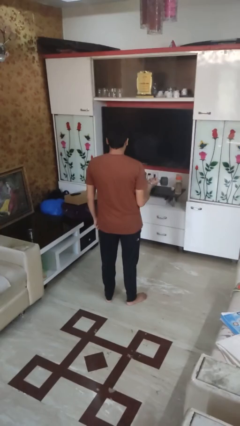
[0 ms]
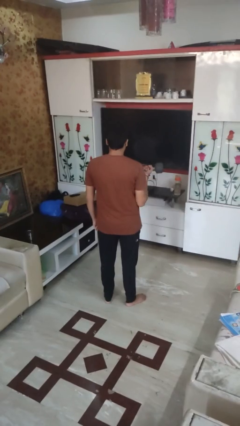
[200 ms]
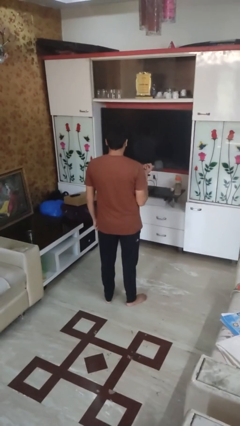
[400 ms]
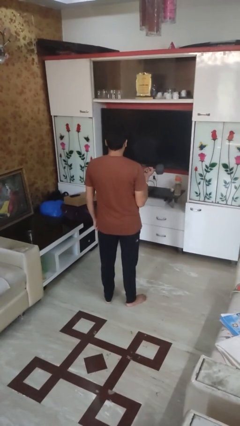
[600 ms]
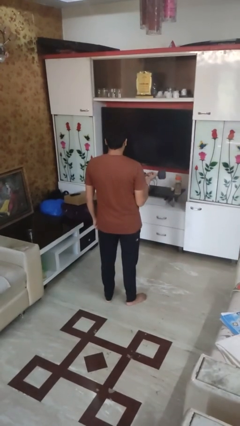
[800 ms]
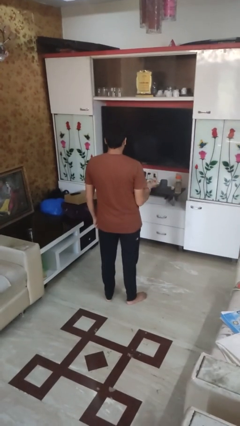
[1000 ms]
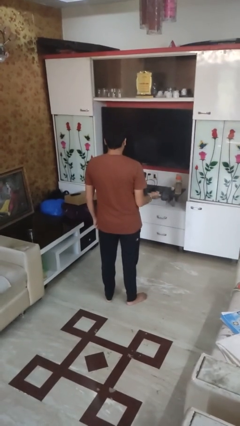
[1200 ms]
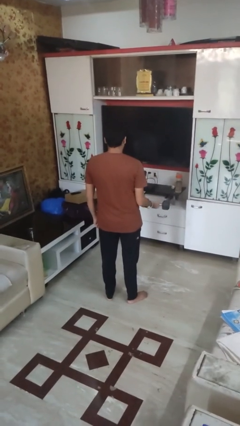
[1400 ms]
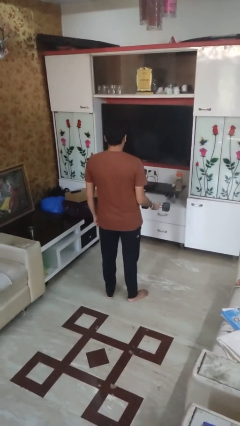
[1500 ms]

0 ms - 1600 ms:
person lifts dumbbells

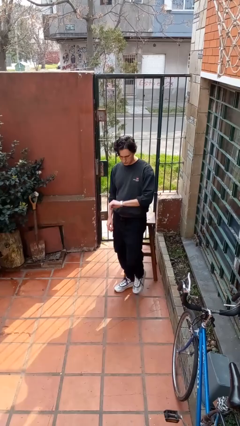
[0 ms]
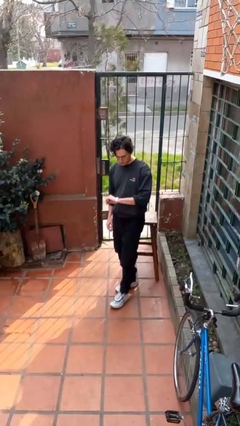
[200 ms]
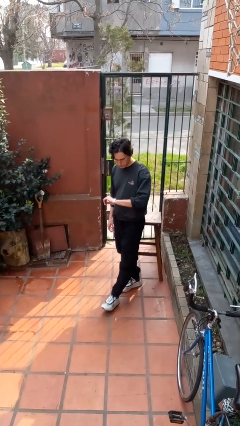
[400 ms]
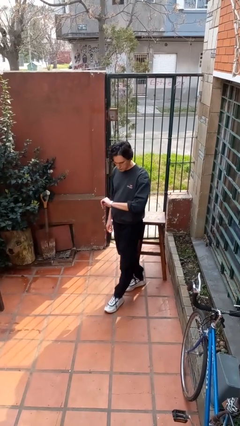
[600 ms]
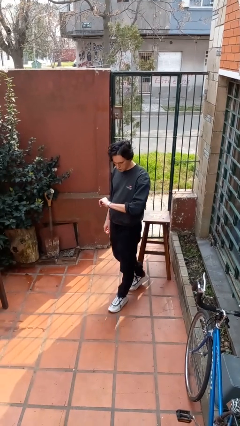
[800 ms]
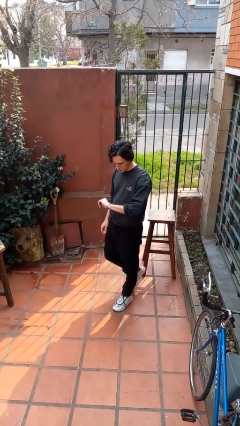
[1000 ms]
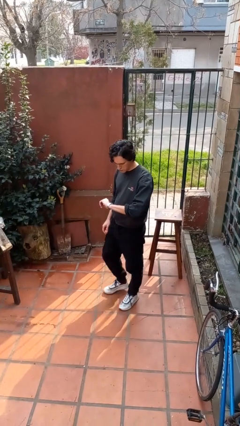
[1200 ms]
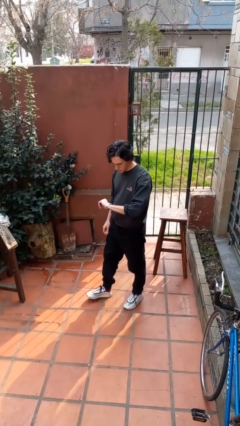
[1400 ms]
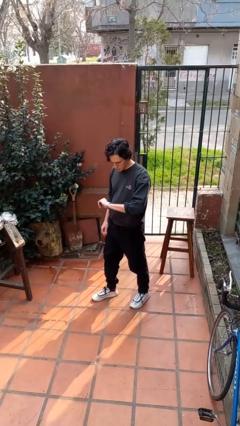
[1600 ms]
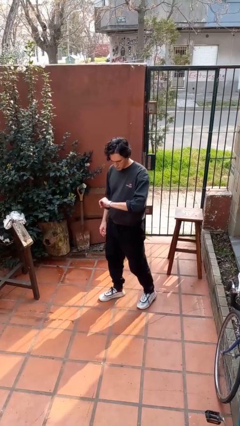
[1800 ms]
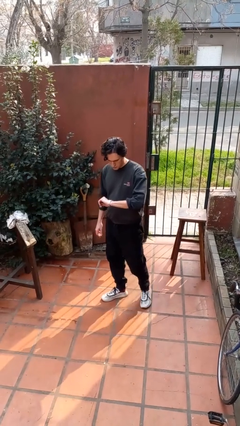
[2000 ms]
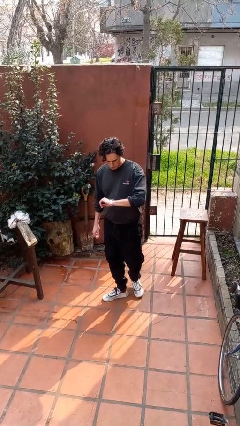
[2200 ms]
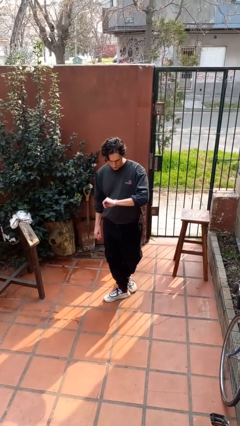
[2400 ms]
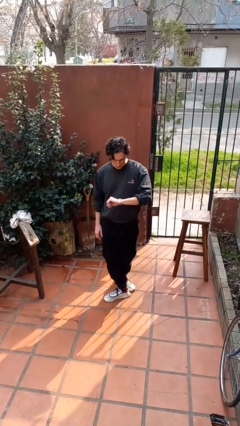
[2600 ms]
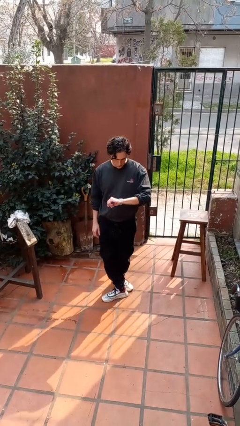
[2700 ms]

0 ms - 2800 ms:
person looks at wristwatch

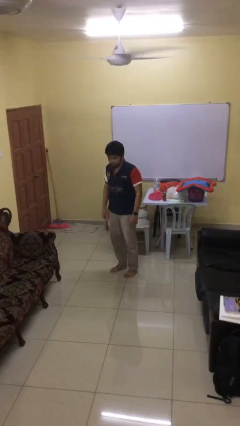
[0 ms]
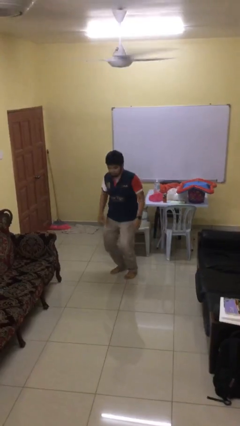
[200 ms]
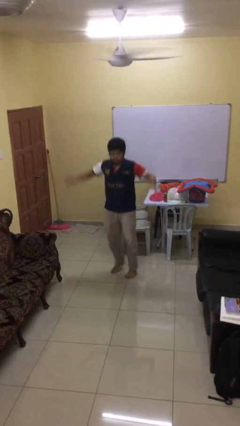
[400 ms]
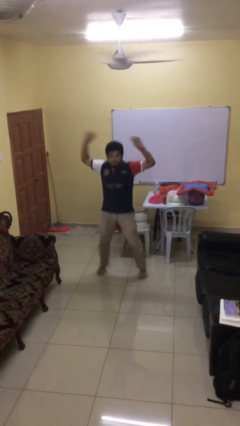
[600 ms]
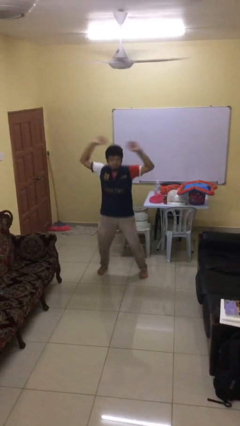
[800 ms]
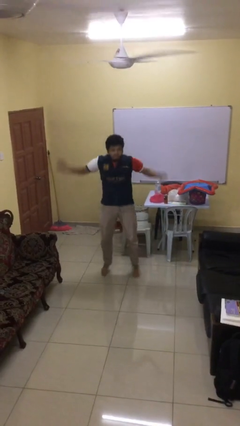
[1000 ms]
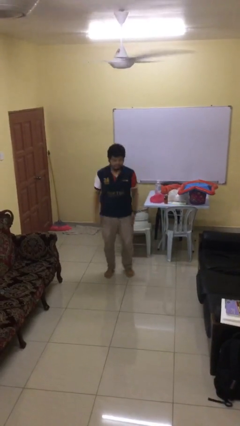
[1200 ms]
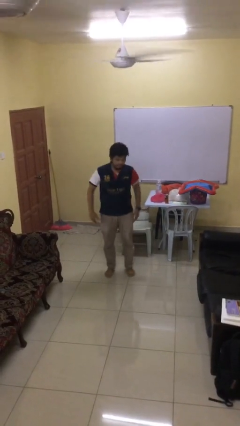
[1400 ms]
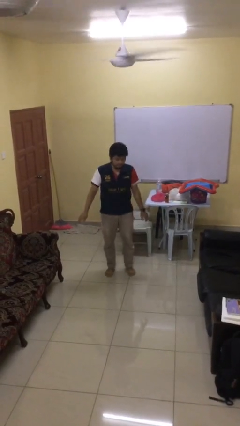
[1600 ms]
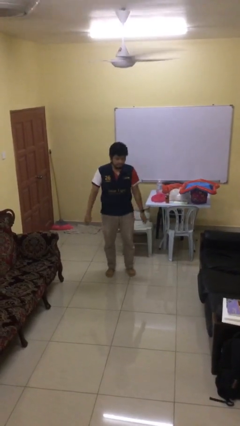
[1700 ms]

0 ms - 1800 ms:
person exercises with jumping jacks

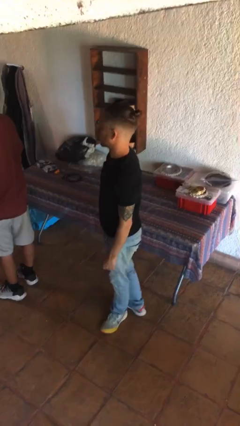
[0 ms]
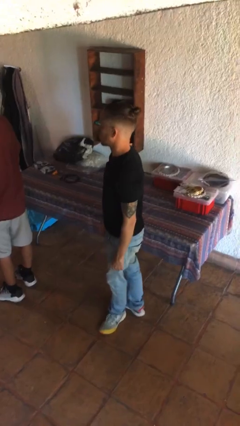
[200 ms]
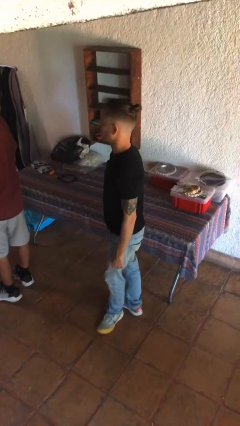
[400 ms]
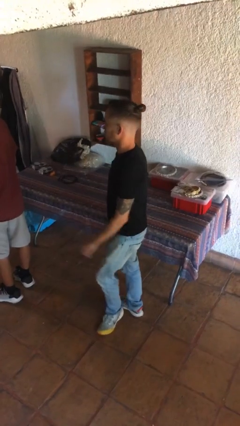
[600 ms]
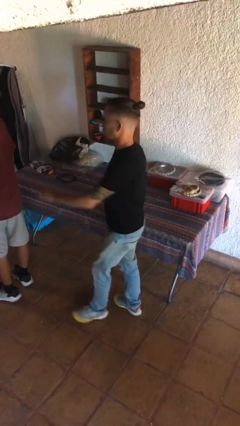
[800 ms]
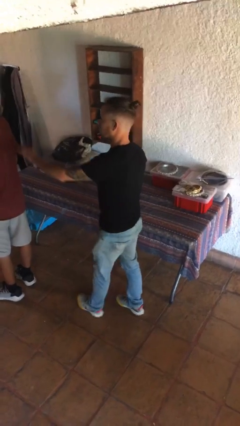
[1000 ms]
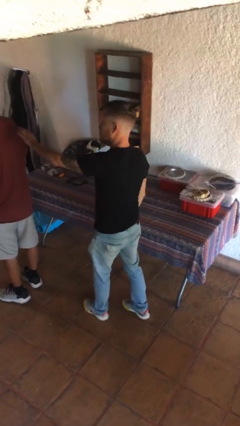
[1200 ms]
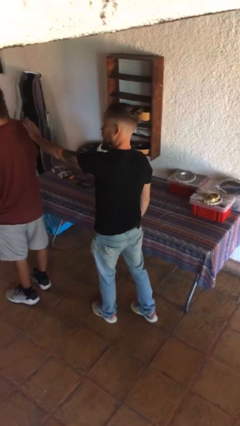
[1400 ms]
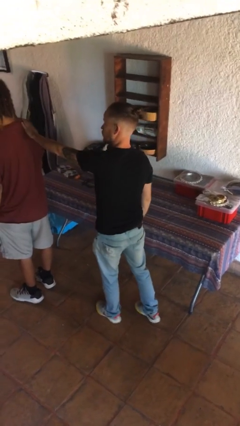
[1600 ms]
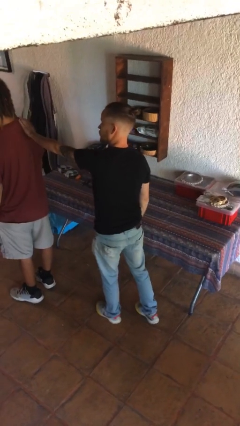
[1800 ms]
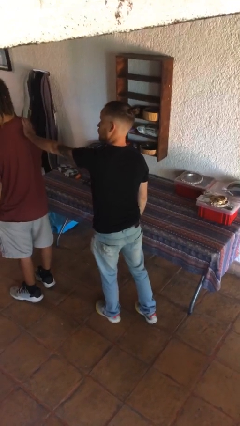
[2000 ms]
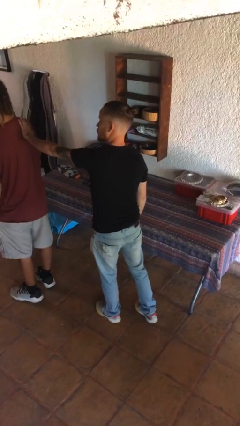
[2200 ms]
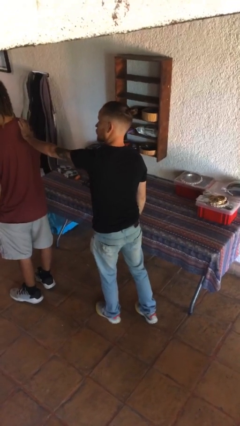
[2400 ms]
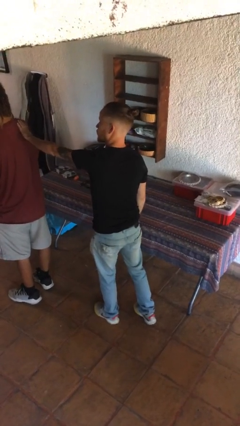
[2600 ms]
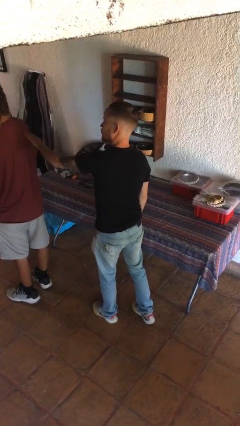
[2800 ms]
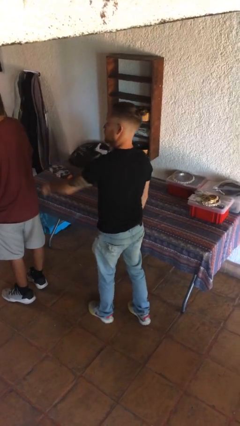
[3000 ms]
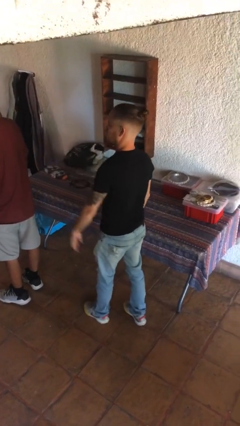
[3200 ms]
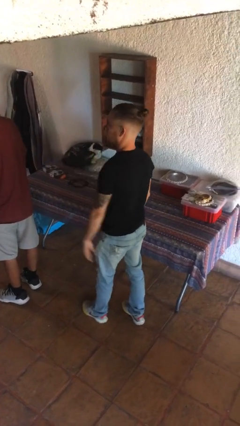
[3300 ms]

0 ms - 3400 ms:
person touches back of person

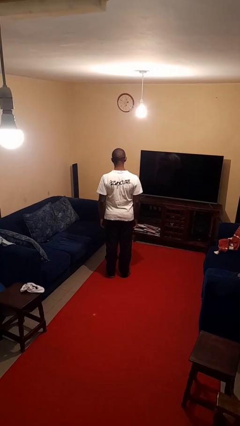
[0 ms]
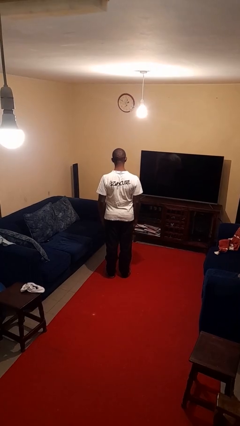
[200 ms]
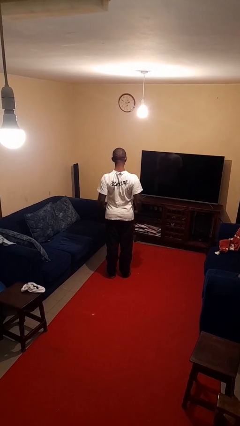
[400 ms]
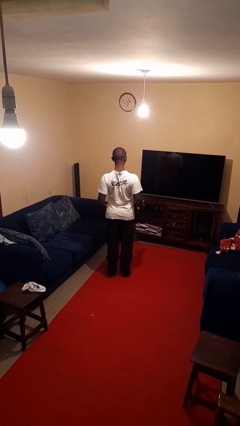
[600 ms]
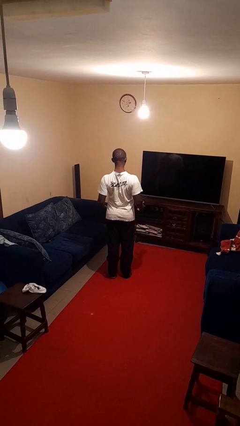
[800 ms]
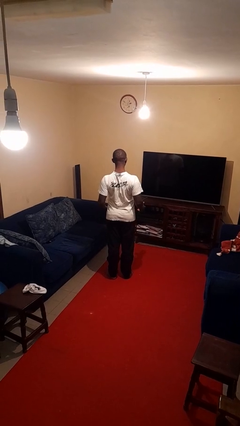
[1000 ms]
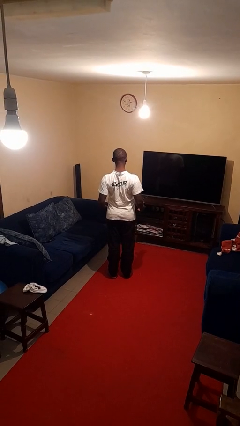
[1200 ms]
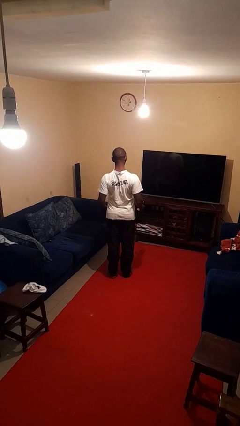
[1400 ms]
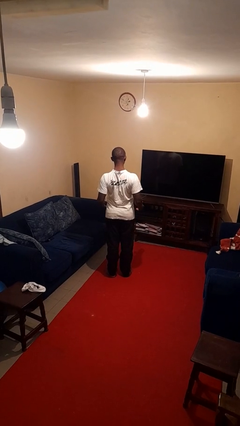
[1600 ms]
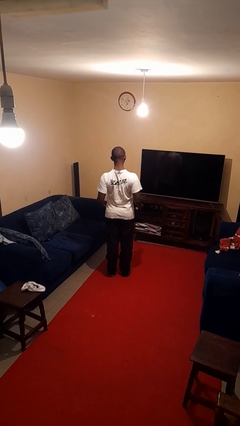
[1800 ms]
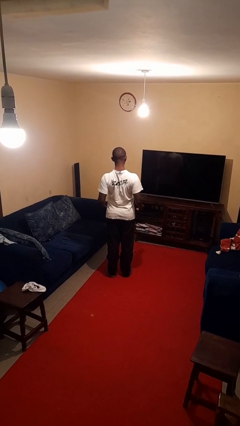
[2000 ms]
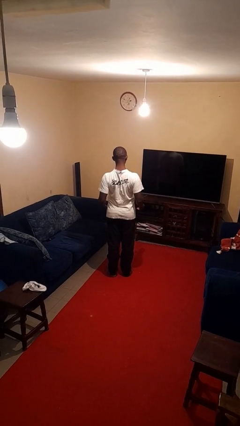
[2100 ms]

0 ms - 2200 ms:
person shrugs

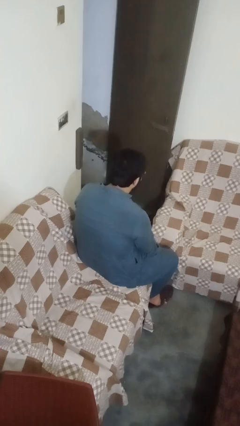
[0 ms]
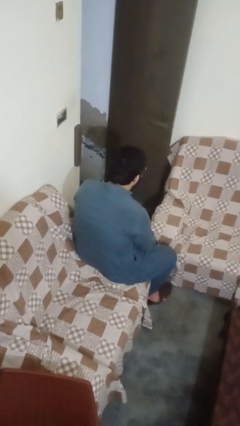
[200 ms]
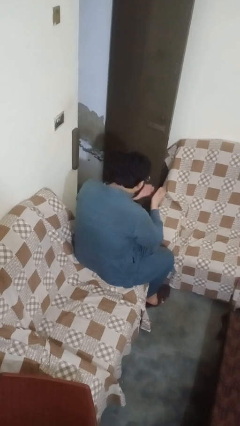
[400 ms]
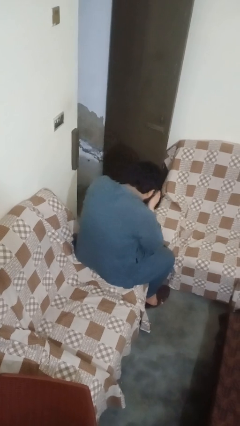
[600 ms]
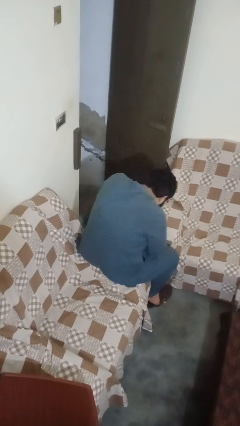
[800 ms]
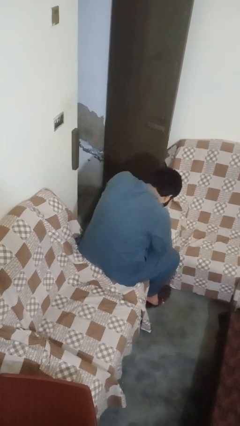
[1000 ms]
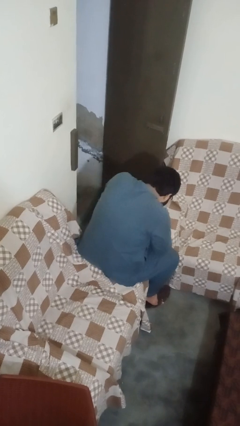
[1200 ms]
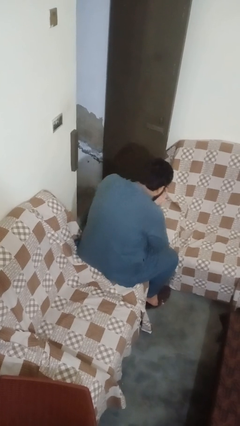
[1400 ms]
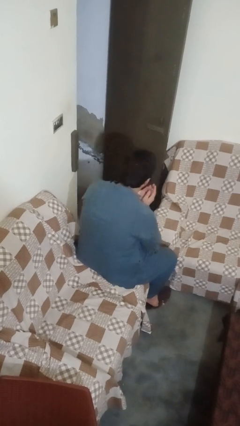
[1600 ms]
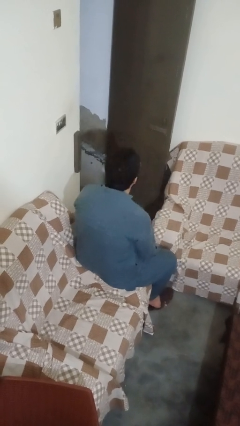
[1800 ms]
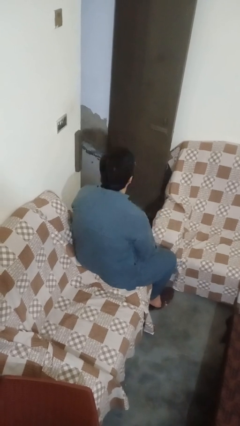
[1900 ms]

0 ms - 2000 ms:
person sneezes into hand

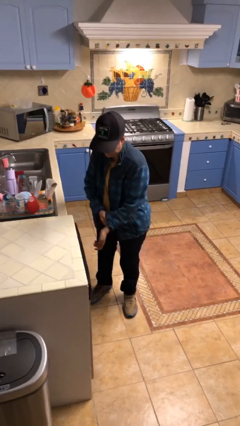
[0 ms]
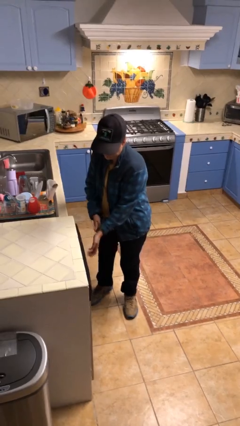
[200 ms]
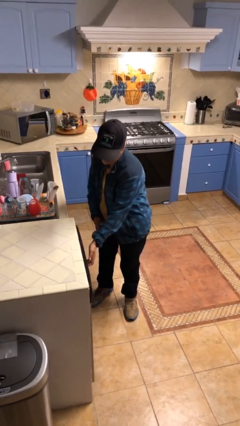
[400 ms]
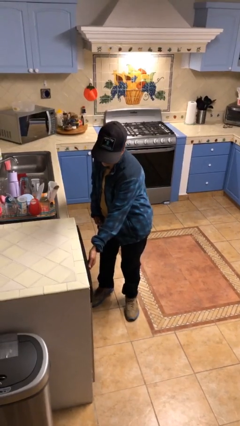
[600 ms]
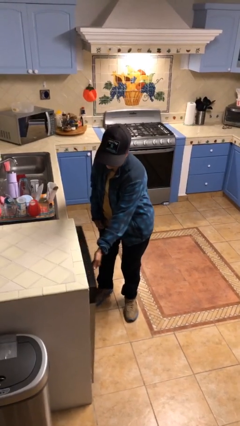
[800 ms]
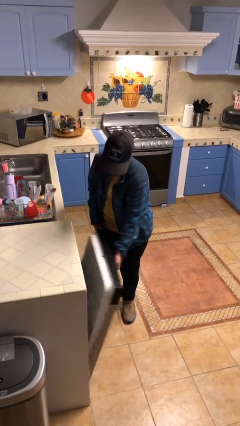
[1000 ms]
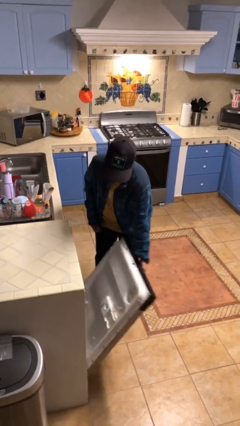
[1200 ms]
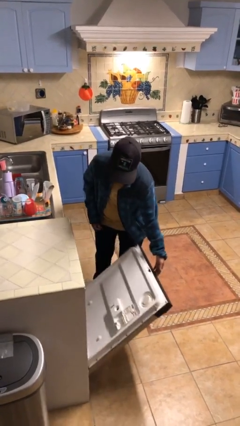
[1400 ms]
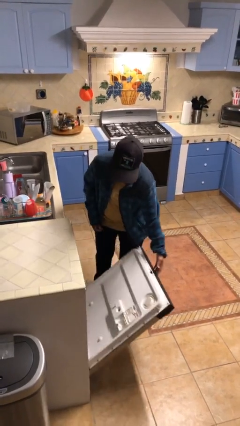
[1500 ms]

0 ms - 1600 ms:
person opens dishwasher

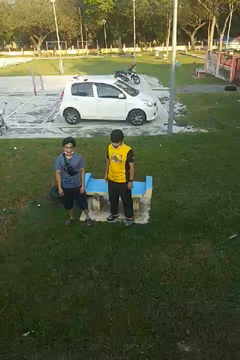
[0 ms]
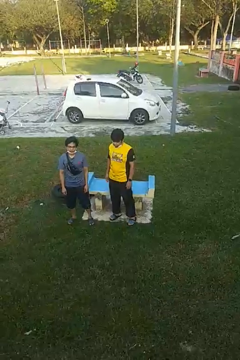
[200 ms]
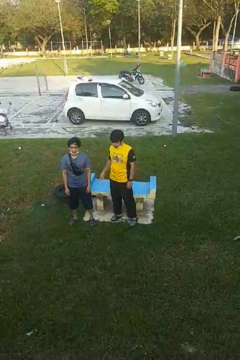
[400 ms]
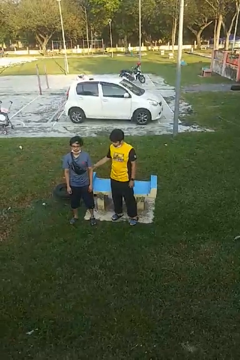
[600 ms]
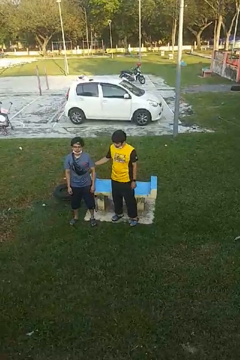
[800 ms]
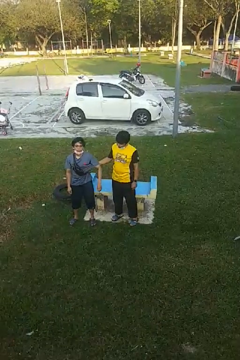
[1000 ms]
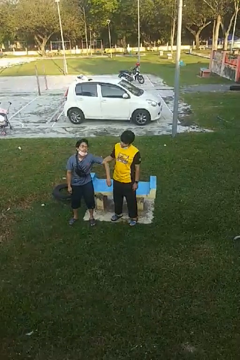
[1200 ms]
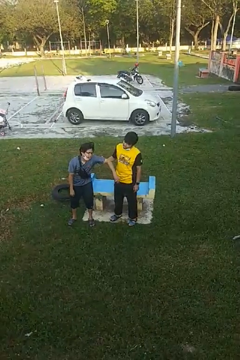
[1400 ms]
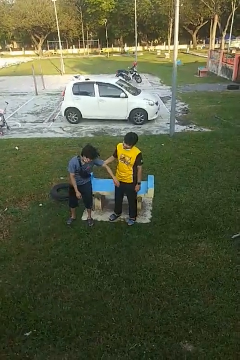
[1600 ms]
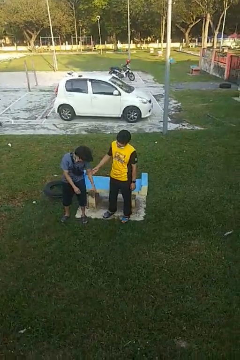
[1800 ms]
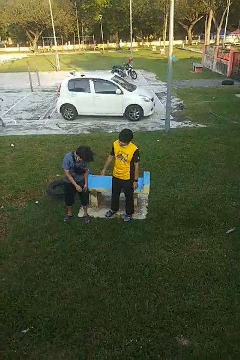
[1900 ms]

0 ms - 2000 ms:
person grabs person by bicep
